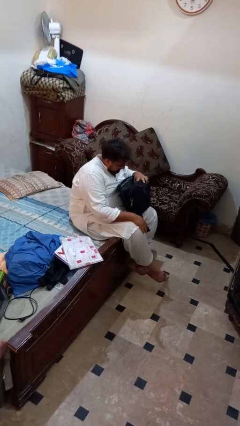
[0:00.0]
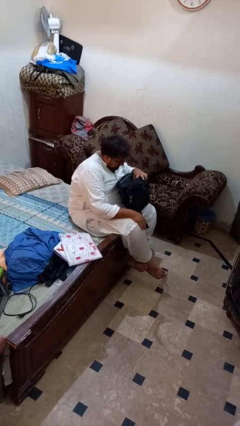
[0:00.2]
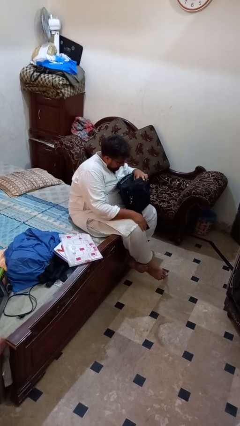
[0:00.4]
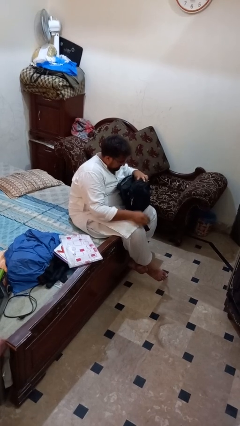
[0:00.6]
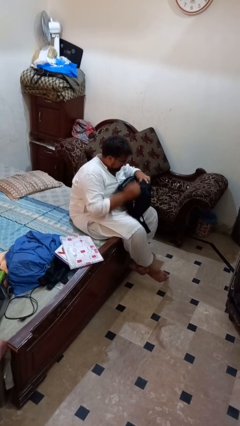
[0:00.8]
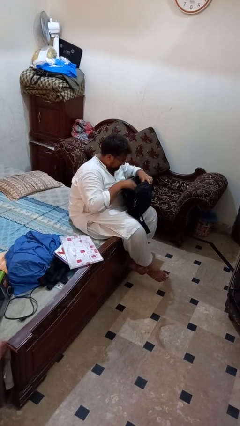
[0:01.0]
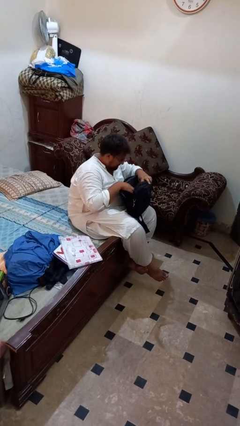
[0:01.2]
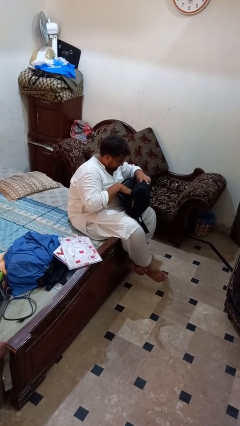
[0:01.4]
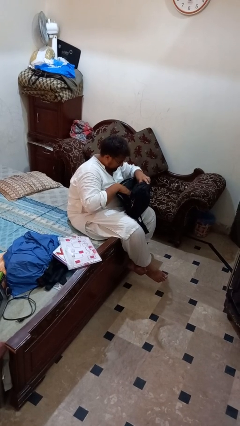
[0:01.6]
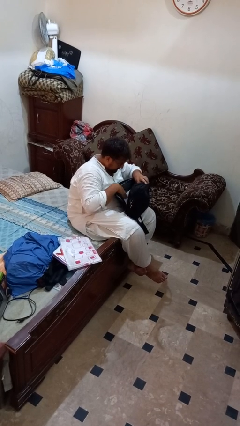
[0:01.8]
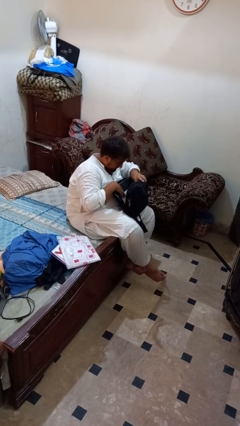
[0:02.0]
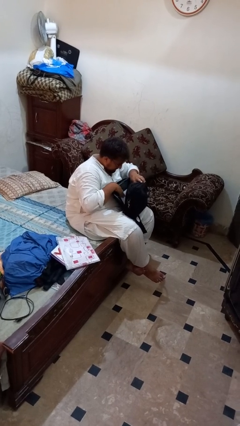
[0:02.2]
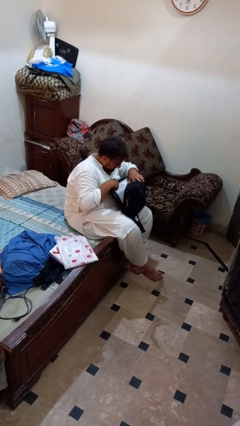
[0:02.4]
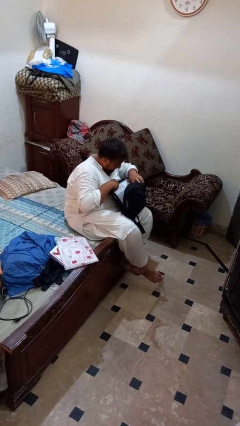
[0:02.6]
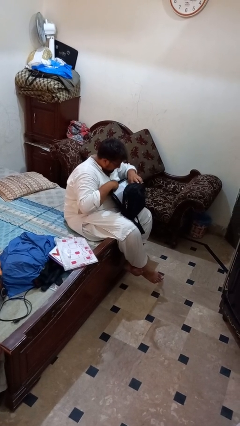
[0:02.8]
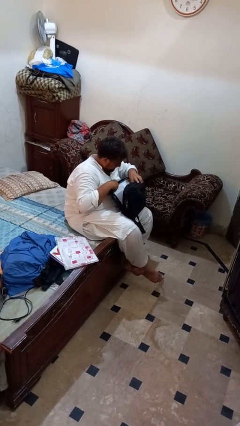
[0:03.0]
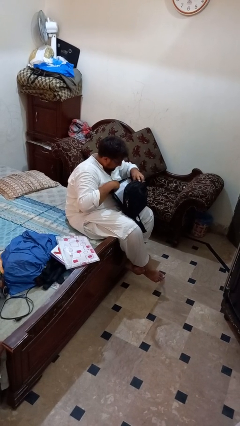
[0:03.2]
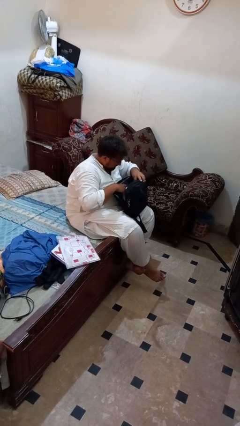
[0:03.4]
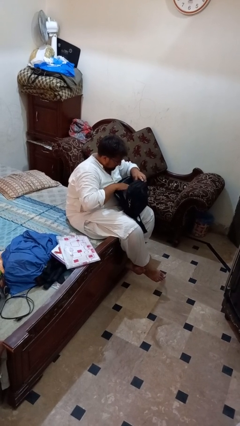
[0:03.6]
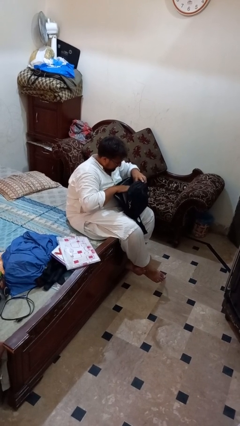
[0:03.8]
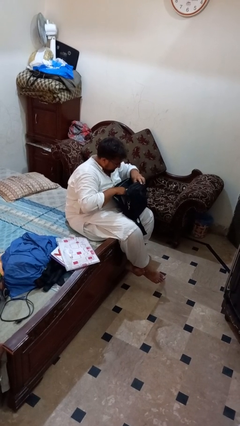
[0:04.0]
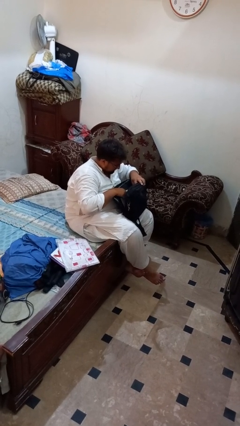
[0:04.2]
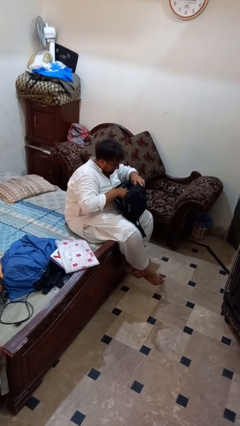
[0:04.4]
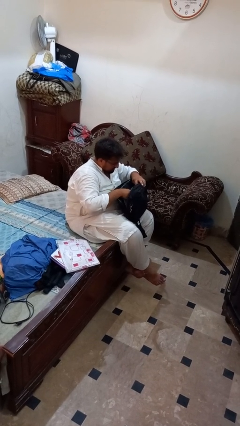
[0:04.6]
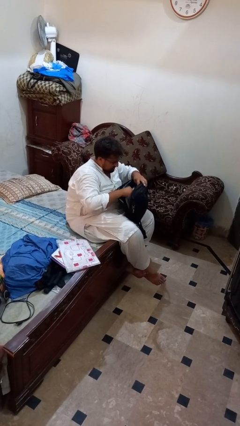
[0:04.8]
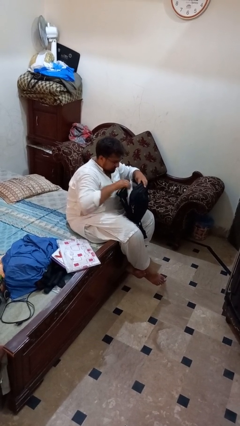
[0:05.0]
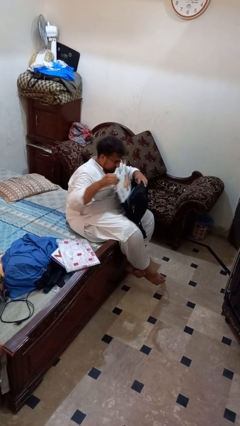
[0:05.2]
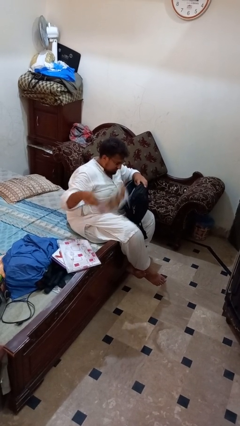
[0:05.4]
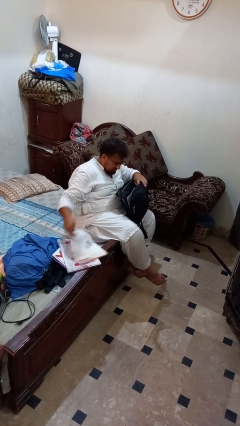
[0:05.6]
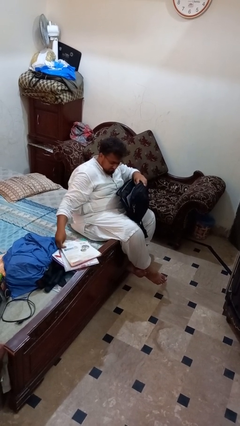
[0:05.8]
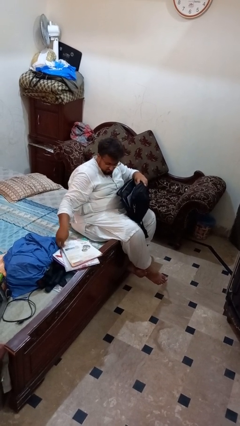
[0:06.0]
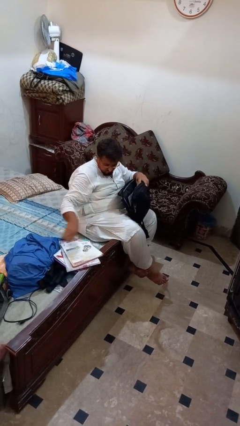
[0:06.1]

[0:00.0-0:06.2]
person searches in bag

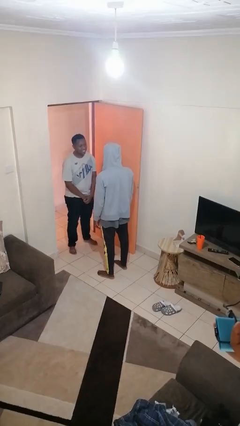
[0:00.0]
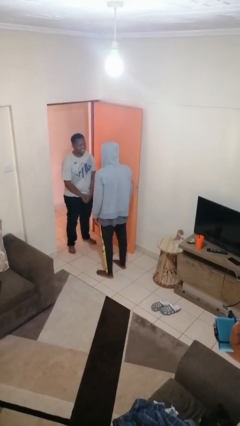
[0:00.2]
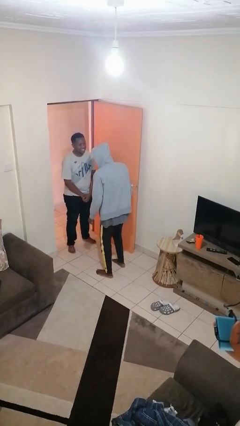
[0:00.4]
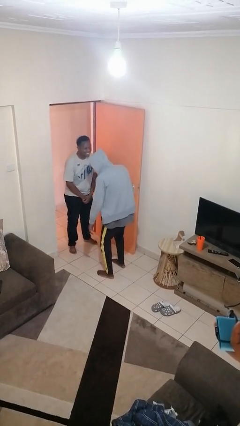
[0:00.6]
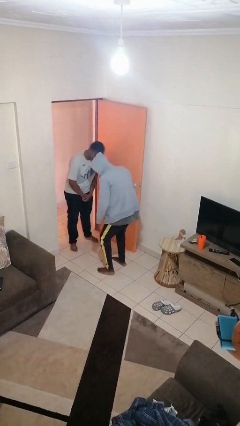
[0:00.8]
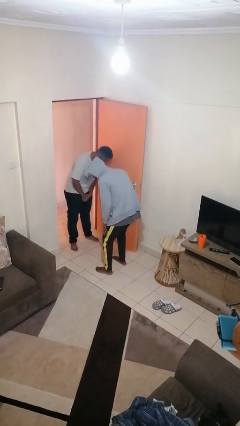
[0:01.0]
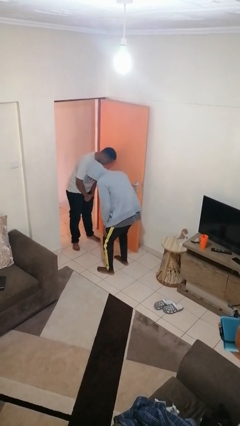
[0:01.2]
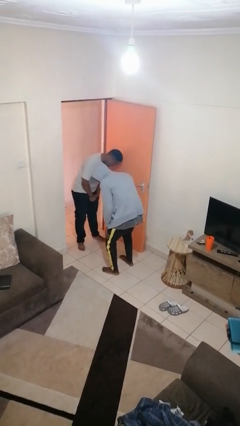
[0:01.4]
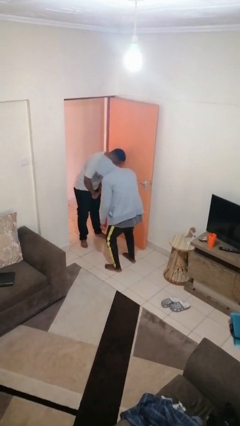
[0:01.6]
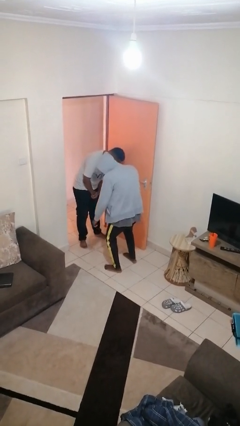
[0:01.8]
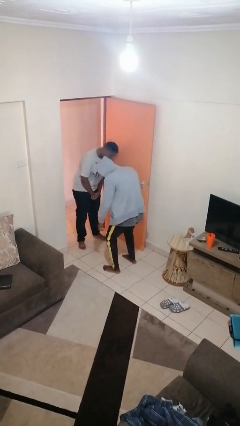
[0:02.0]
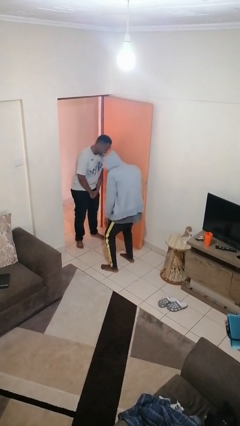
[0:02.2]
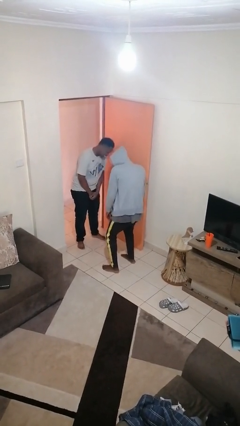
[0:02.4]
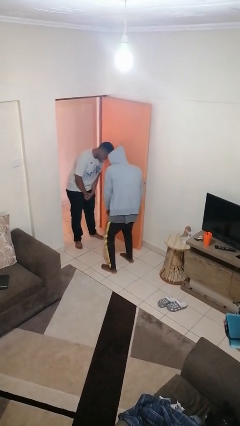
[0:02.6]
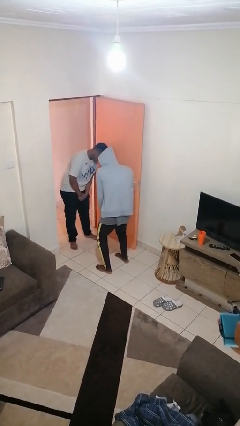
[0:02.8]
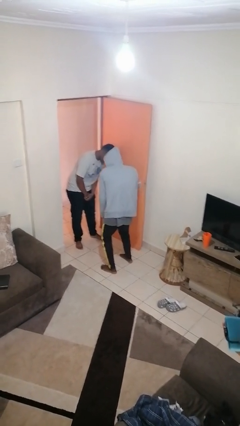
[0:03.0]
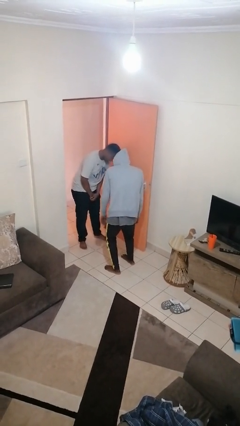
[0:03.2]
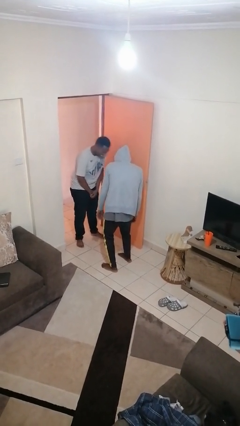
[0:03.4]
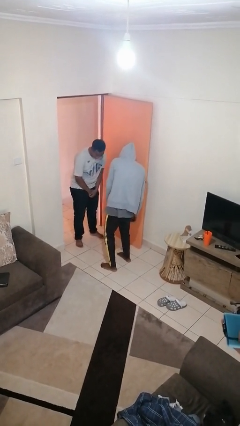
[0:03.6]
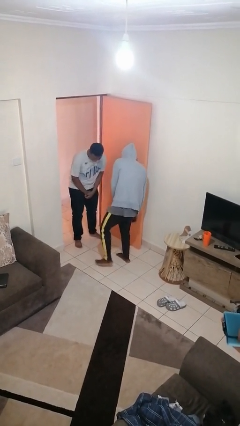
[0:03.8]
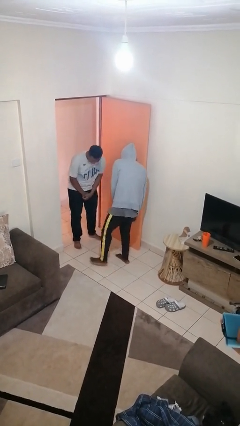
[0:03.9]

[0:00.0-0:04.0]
person laughs with person

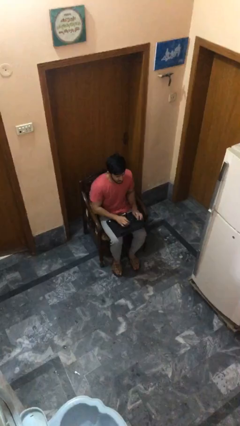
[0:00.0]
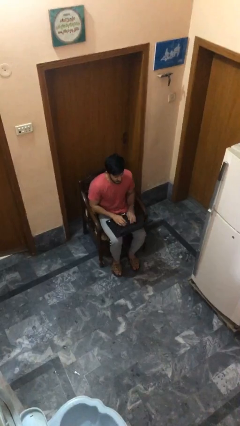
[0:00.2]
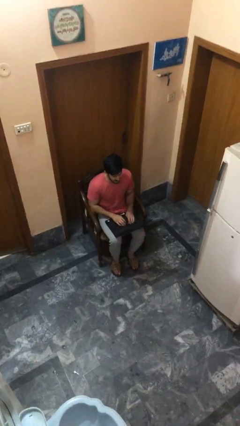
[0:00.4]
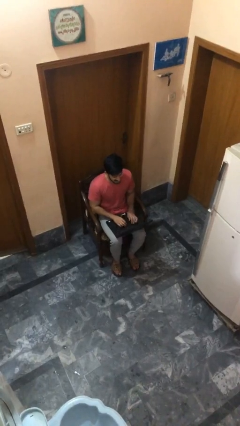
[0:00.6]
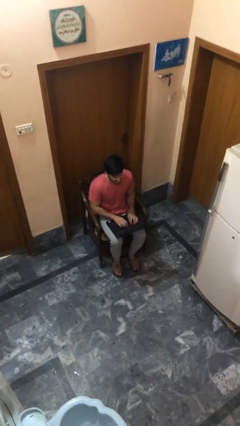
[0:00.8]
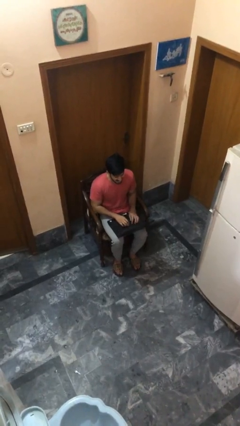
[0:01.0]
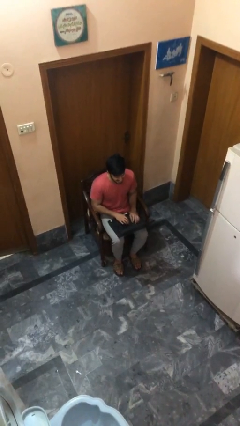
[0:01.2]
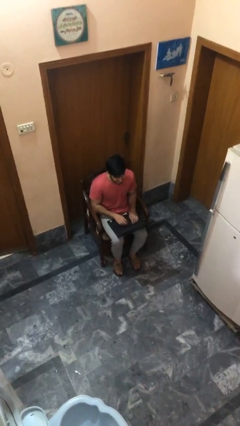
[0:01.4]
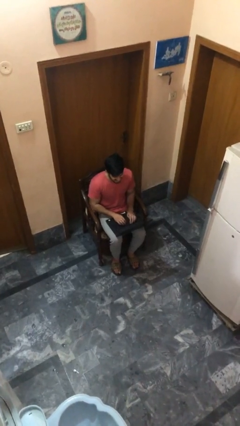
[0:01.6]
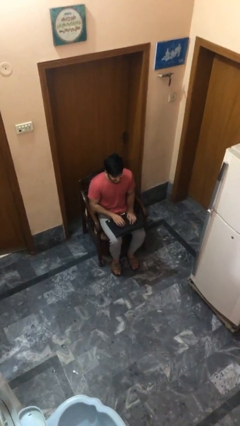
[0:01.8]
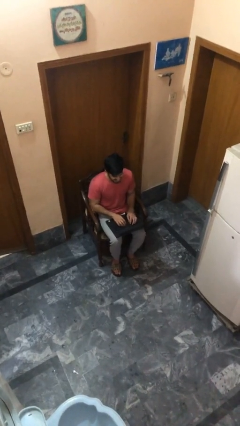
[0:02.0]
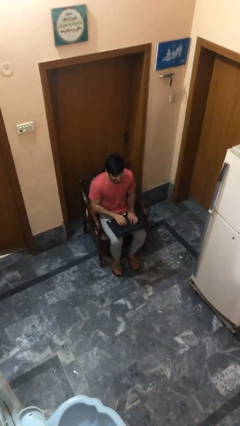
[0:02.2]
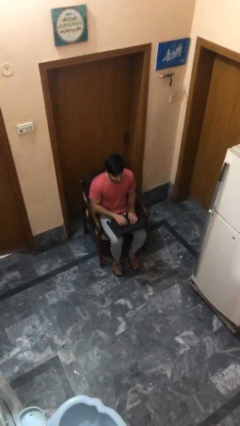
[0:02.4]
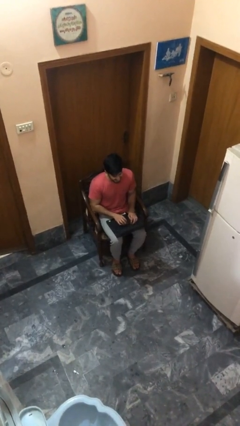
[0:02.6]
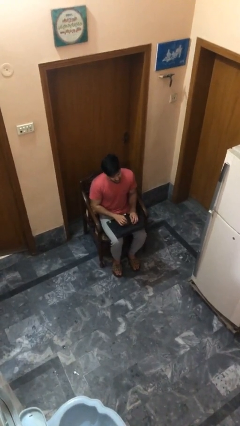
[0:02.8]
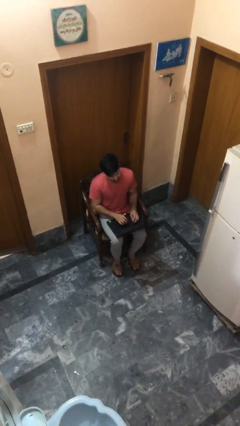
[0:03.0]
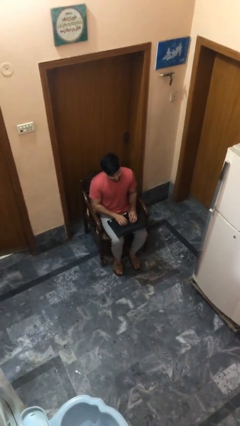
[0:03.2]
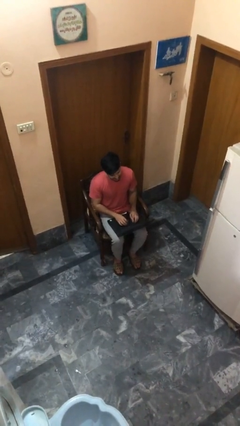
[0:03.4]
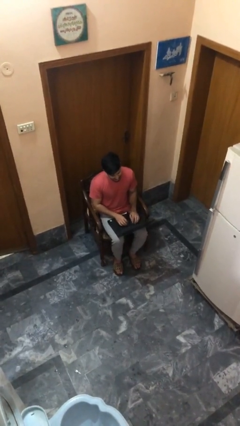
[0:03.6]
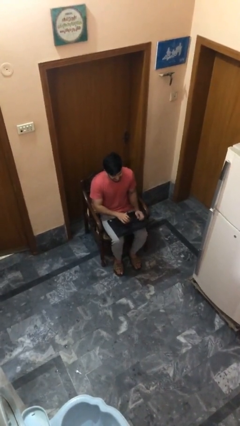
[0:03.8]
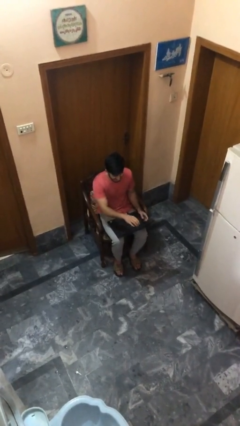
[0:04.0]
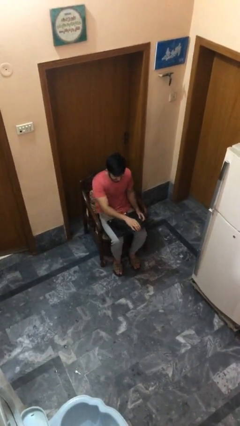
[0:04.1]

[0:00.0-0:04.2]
person interacts with laptop

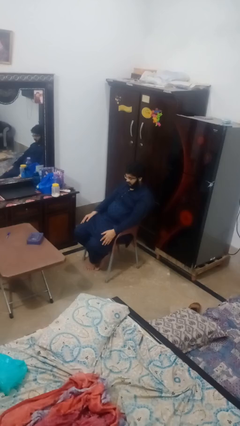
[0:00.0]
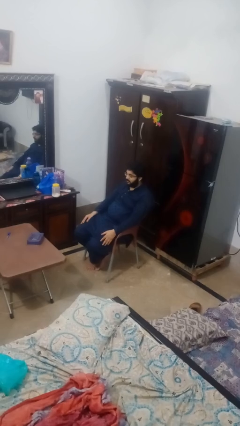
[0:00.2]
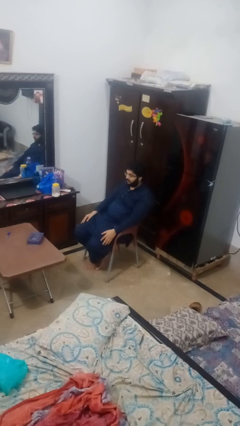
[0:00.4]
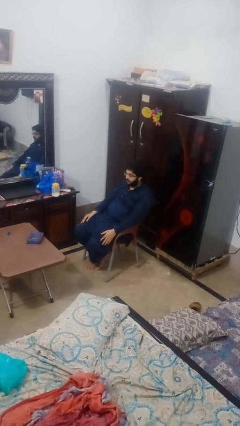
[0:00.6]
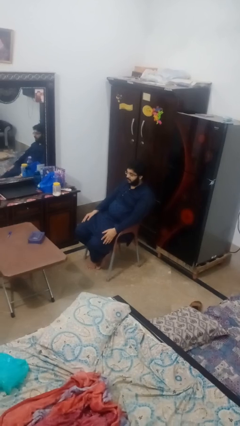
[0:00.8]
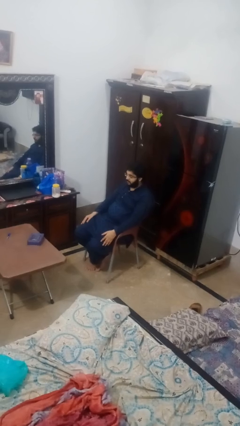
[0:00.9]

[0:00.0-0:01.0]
person nods head

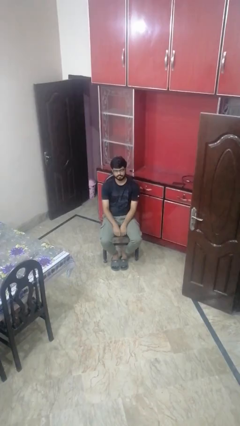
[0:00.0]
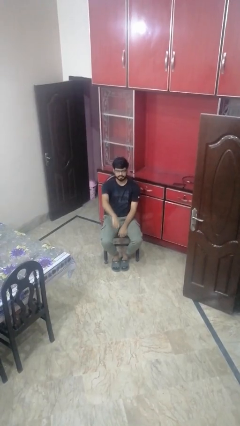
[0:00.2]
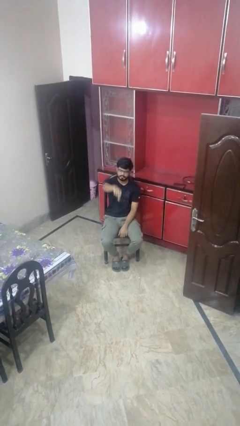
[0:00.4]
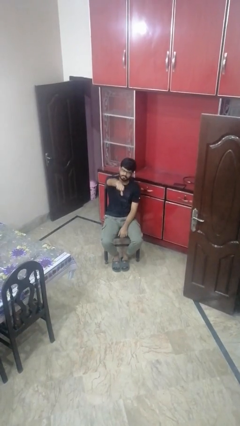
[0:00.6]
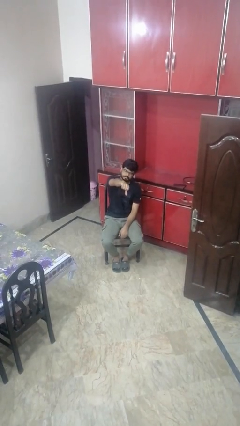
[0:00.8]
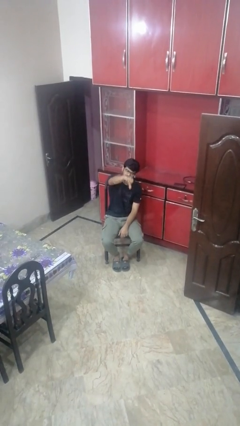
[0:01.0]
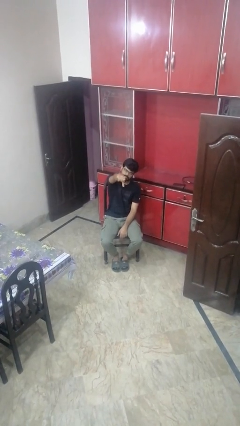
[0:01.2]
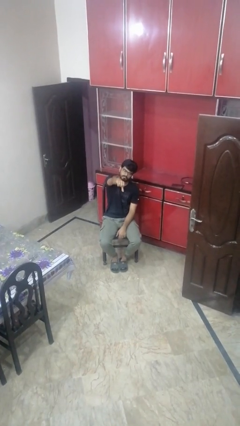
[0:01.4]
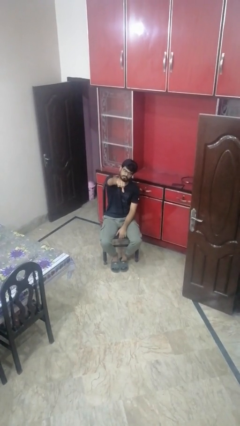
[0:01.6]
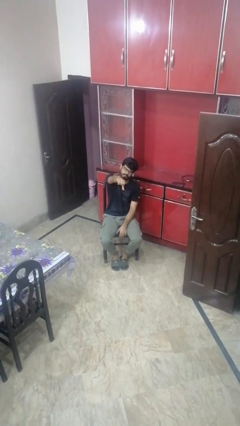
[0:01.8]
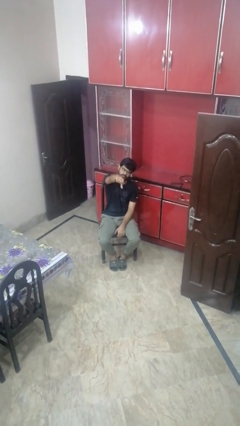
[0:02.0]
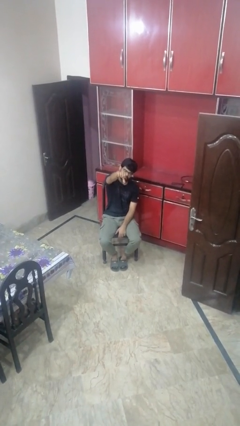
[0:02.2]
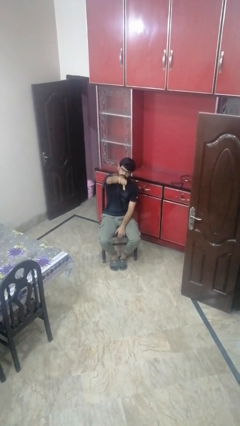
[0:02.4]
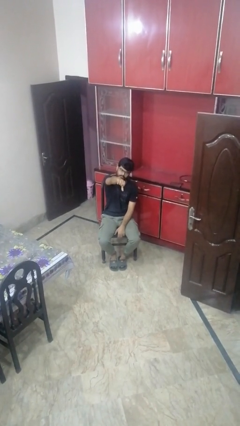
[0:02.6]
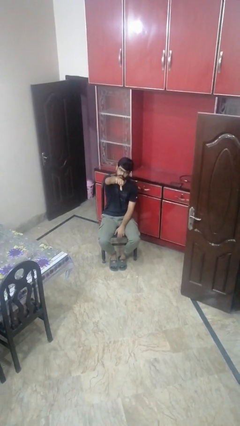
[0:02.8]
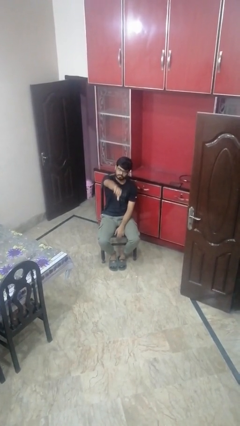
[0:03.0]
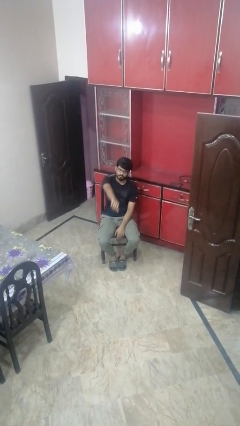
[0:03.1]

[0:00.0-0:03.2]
person gestures thumbs down
